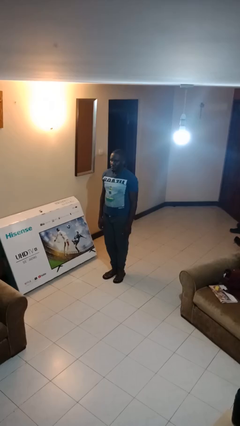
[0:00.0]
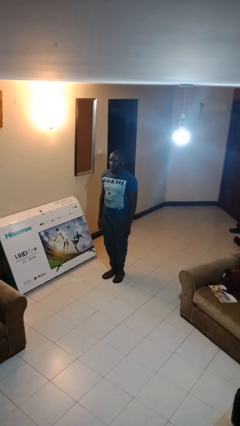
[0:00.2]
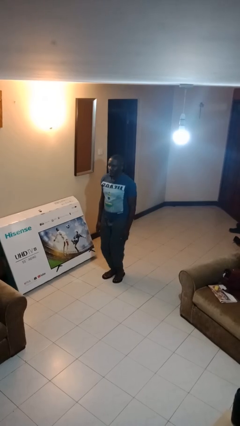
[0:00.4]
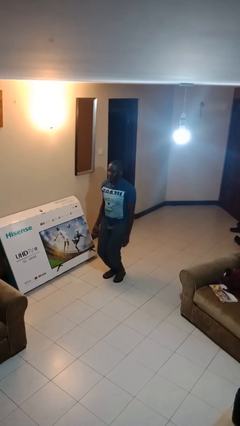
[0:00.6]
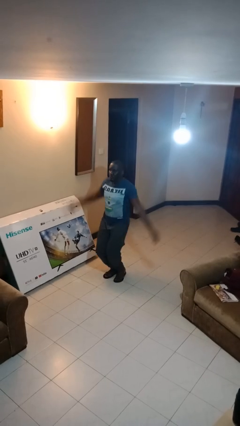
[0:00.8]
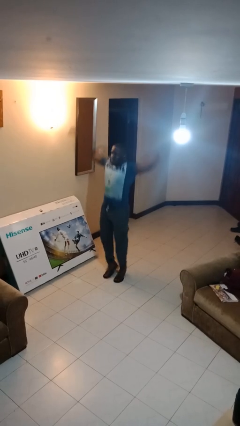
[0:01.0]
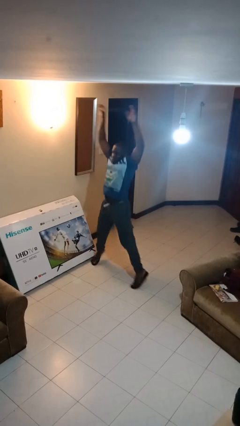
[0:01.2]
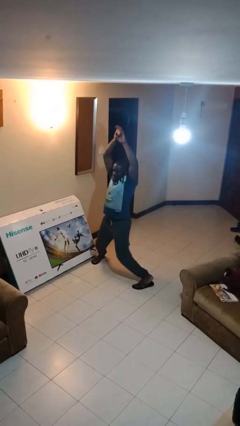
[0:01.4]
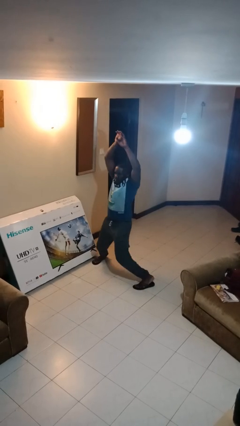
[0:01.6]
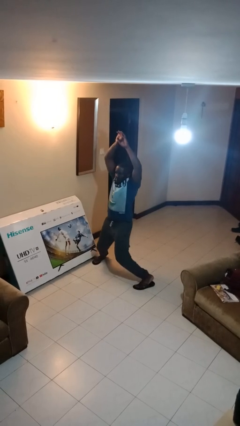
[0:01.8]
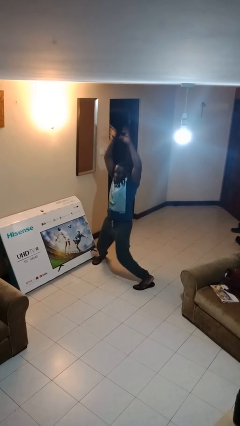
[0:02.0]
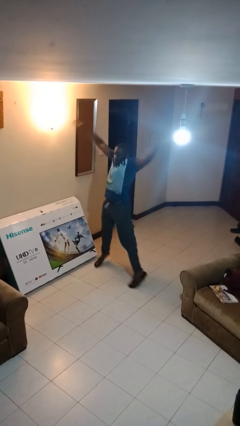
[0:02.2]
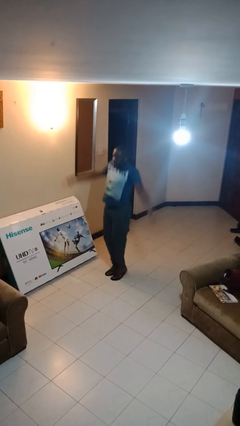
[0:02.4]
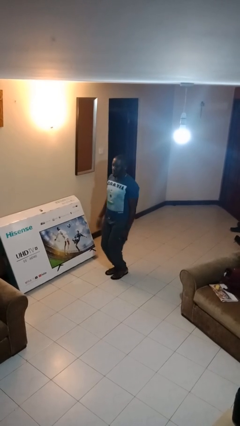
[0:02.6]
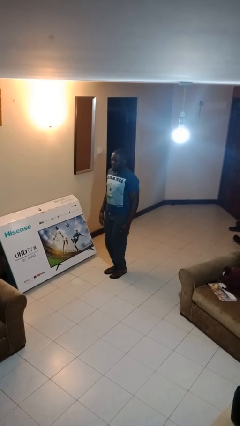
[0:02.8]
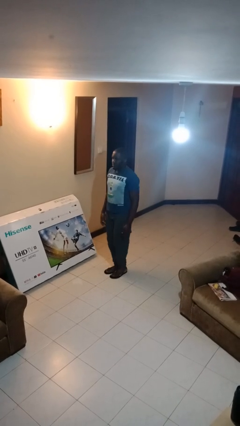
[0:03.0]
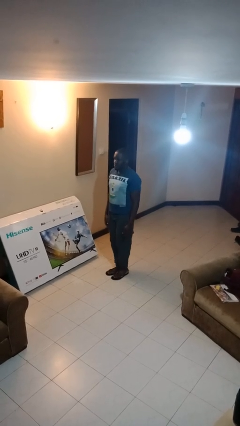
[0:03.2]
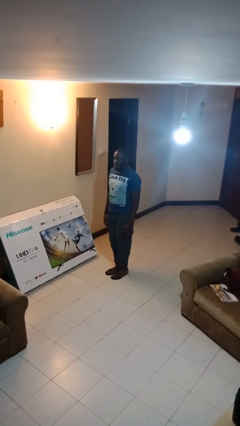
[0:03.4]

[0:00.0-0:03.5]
person exercises with jumping jacks

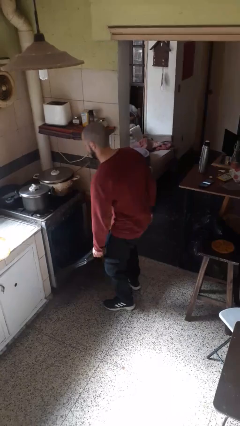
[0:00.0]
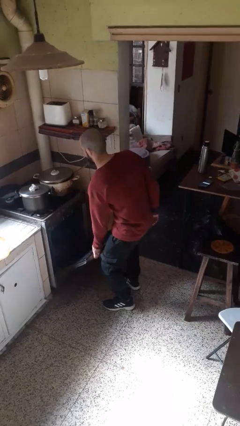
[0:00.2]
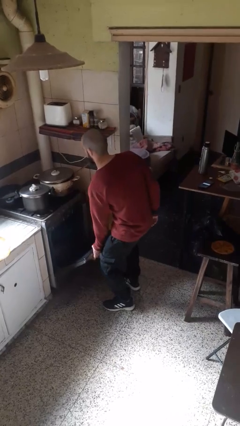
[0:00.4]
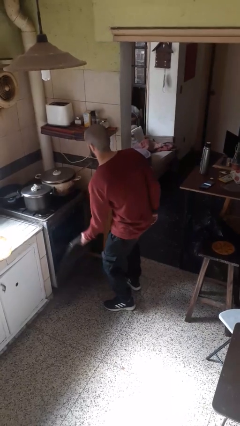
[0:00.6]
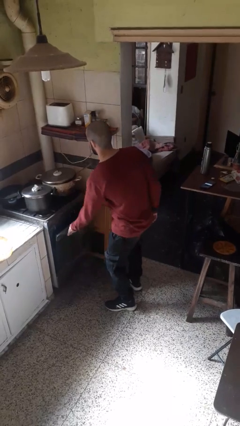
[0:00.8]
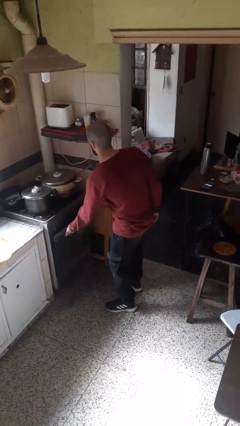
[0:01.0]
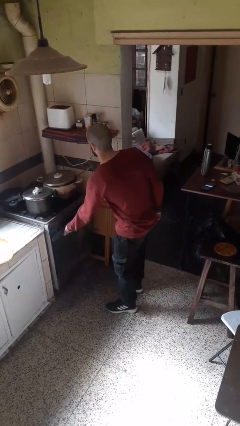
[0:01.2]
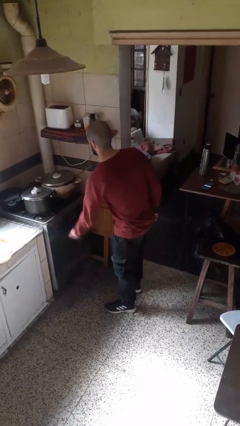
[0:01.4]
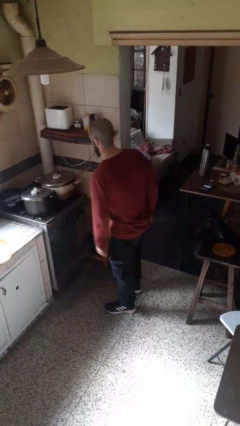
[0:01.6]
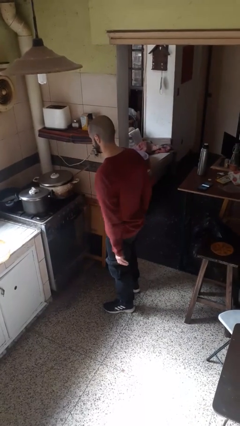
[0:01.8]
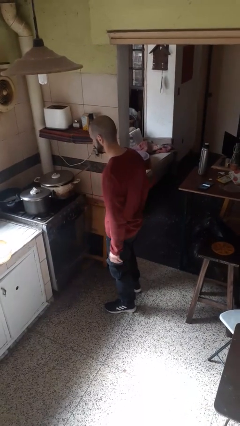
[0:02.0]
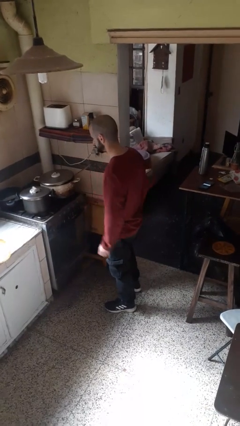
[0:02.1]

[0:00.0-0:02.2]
person closes oven door

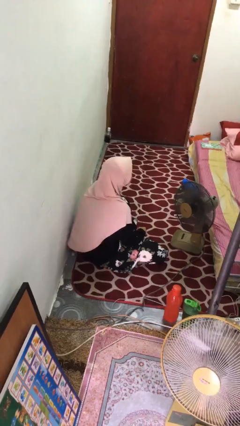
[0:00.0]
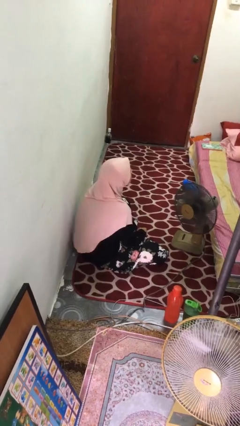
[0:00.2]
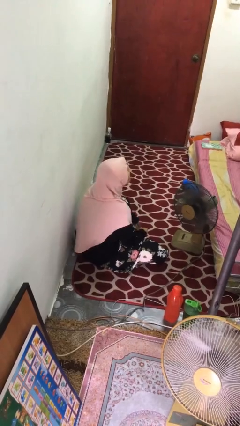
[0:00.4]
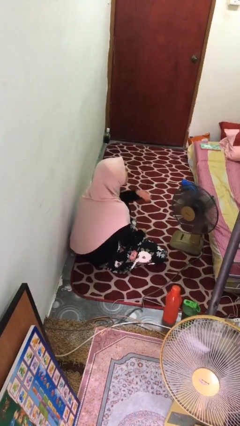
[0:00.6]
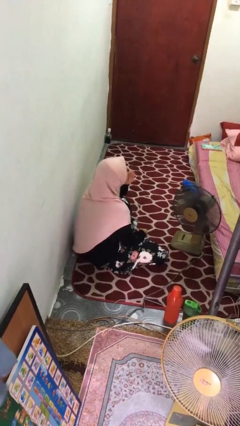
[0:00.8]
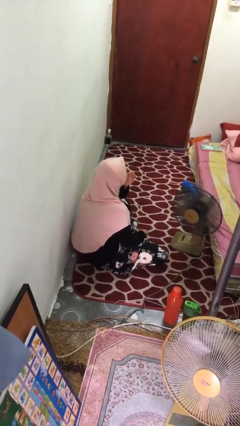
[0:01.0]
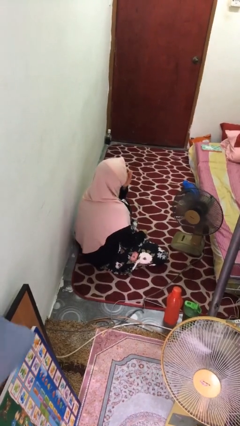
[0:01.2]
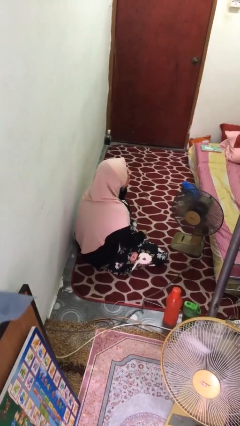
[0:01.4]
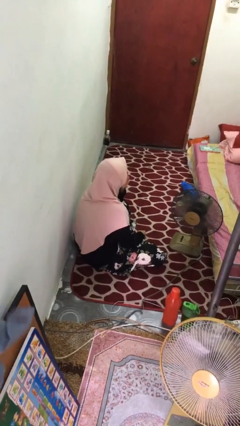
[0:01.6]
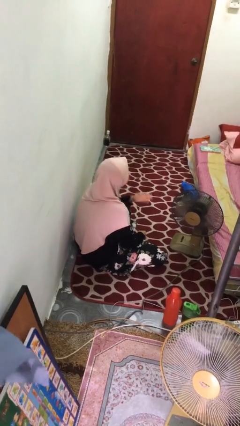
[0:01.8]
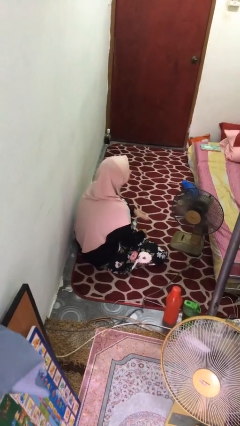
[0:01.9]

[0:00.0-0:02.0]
person yawns

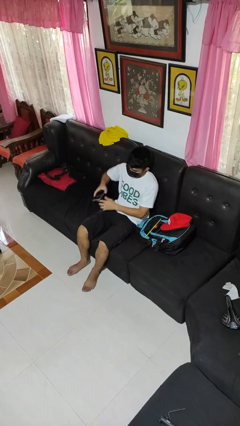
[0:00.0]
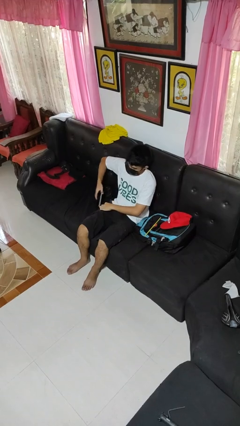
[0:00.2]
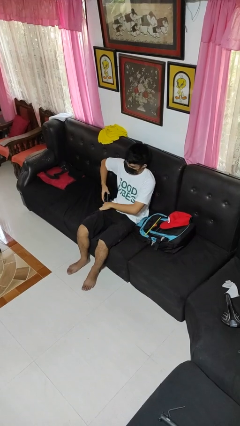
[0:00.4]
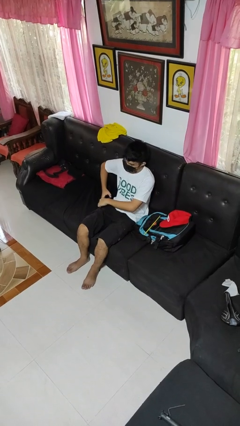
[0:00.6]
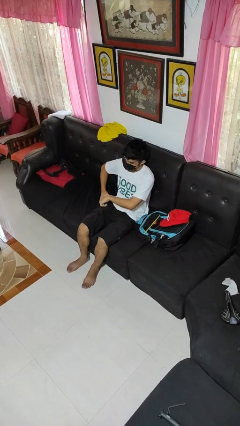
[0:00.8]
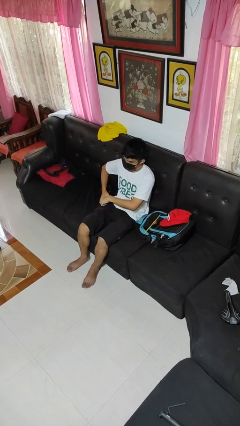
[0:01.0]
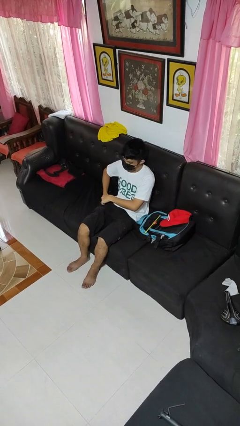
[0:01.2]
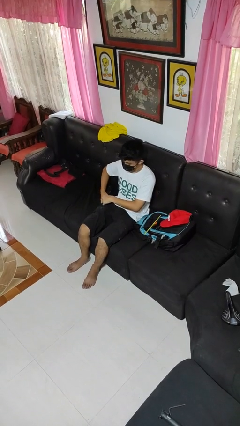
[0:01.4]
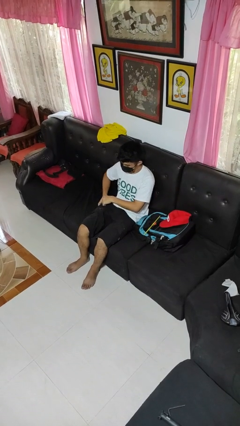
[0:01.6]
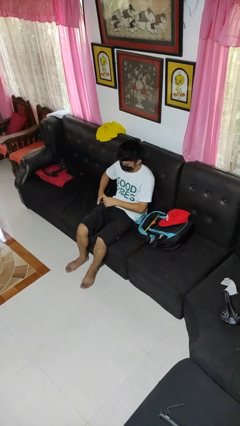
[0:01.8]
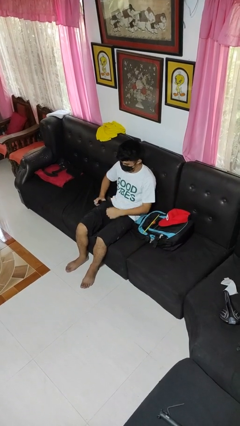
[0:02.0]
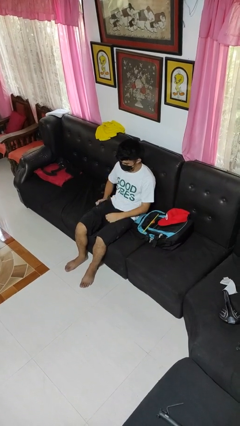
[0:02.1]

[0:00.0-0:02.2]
person puts phone into pocket

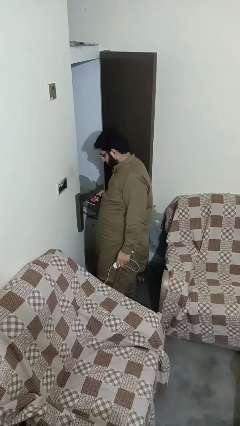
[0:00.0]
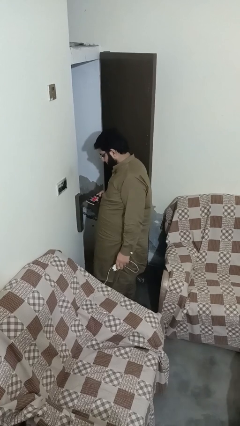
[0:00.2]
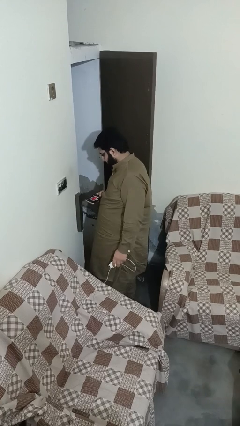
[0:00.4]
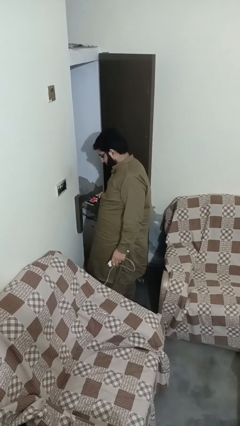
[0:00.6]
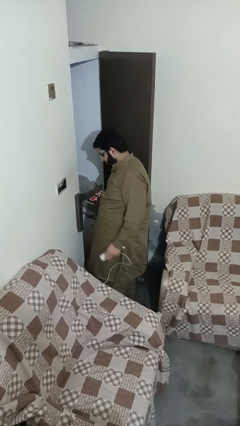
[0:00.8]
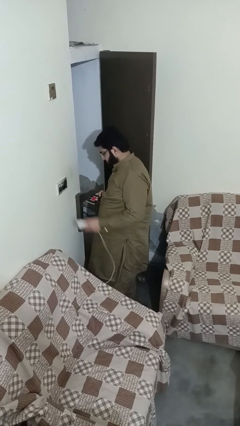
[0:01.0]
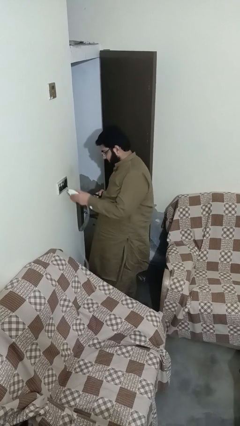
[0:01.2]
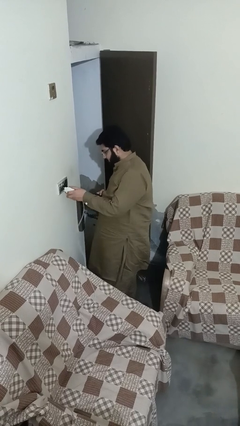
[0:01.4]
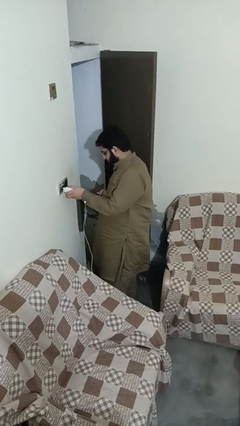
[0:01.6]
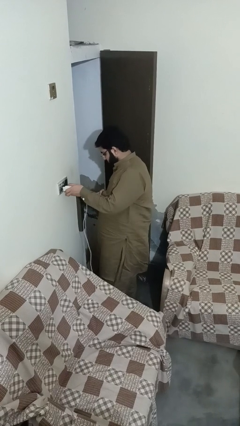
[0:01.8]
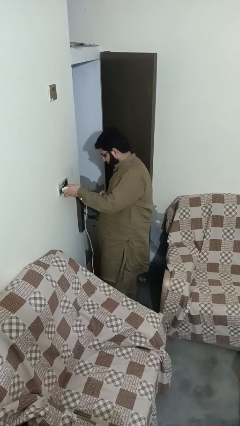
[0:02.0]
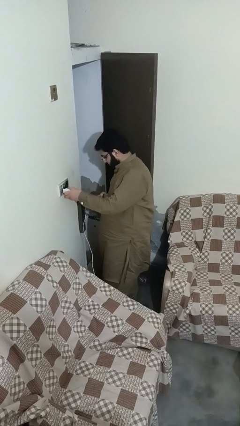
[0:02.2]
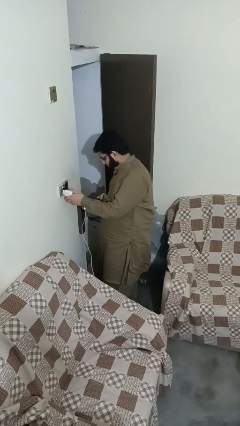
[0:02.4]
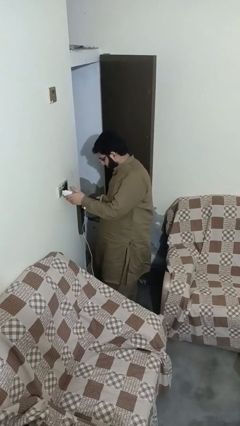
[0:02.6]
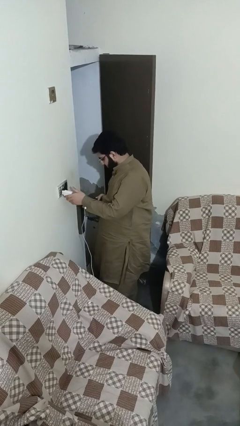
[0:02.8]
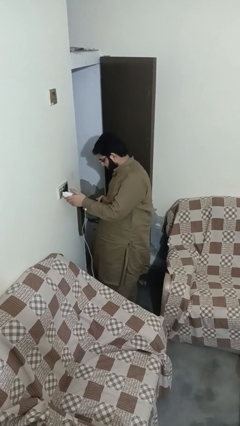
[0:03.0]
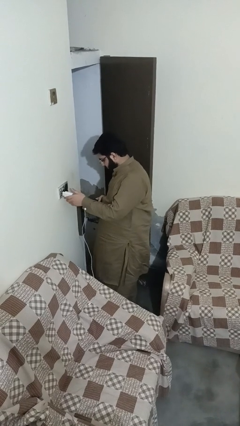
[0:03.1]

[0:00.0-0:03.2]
person plugs into electrical socket

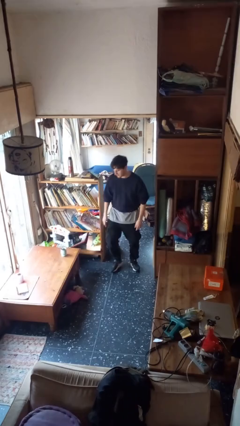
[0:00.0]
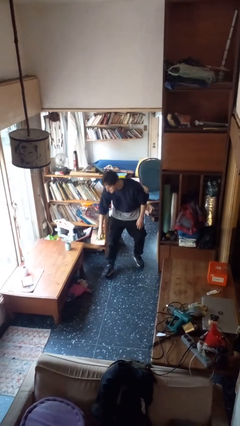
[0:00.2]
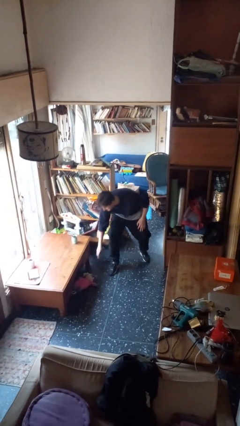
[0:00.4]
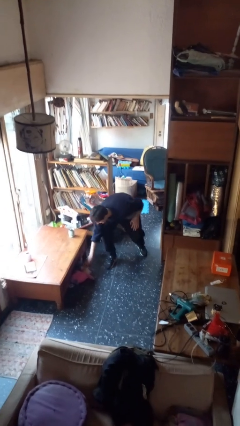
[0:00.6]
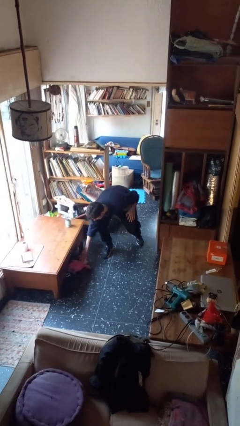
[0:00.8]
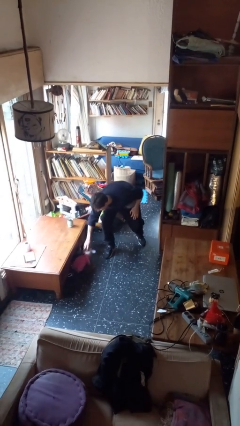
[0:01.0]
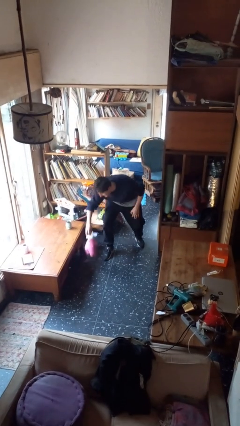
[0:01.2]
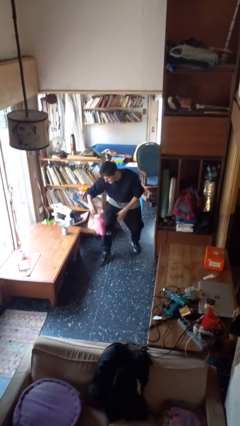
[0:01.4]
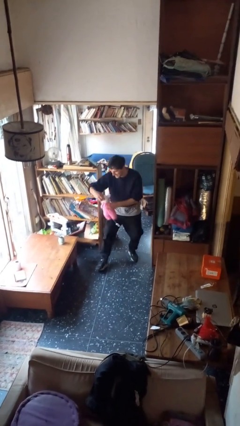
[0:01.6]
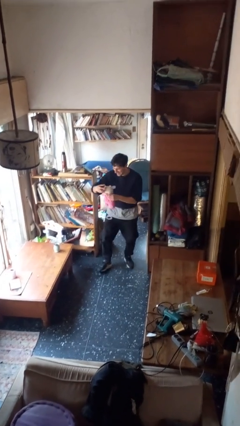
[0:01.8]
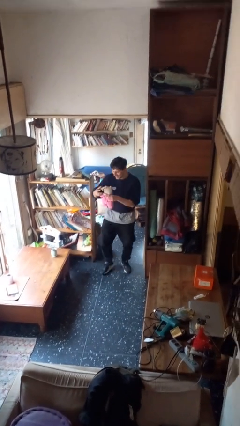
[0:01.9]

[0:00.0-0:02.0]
person picks up object from floor

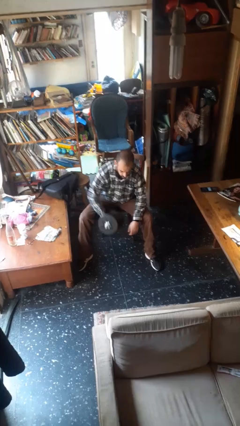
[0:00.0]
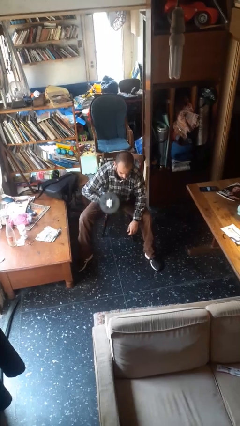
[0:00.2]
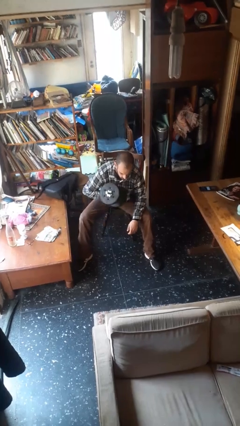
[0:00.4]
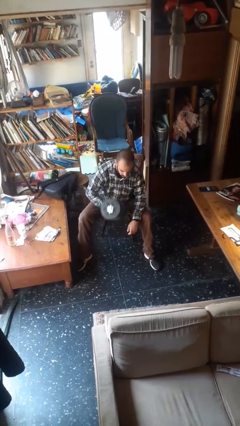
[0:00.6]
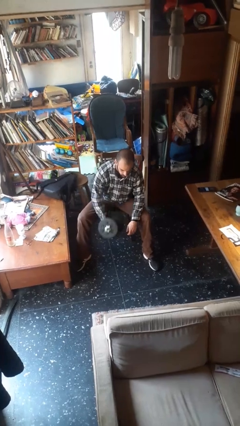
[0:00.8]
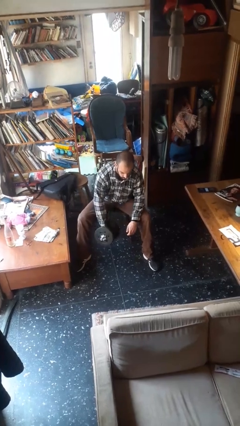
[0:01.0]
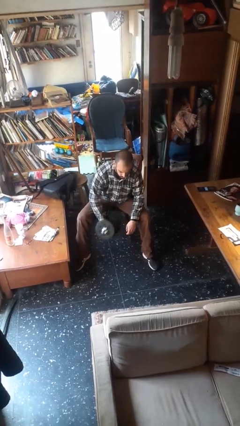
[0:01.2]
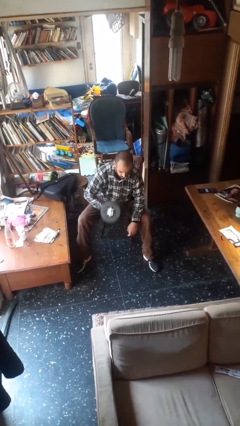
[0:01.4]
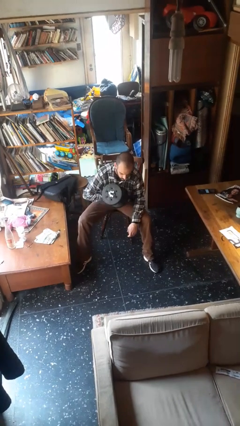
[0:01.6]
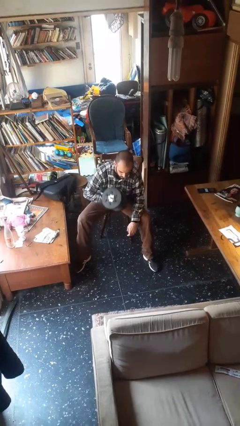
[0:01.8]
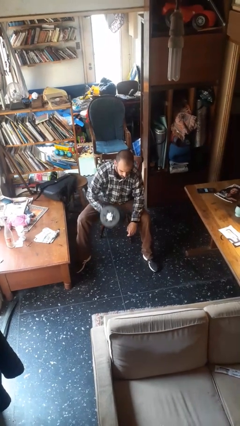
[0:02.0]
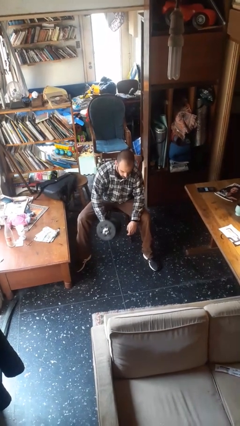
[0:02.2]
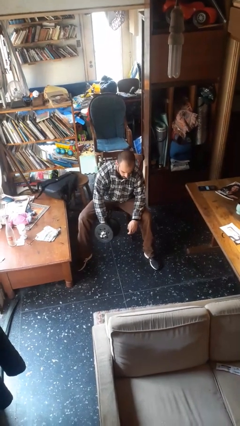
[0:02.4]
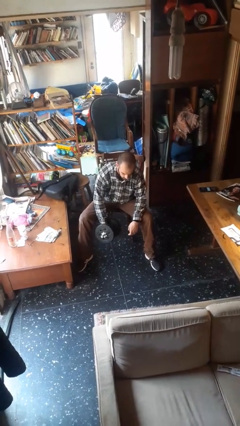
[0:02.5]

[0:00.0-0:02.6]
person lifts dumbbells
